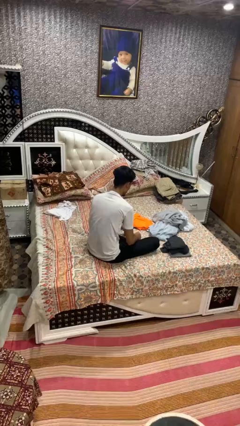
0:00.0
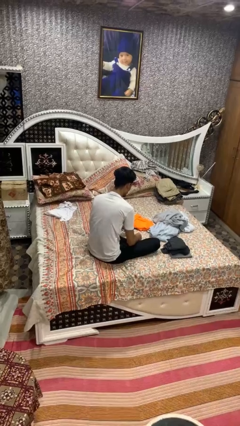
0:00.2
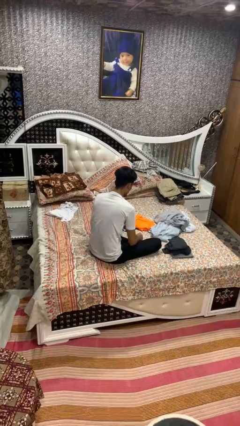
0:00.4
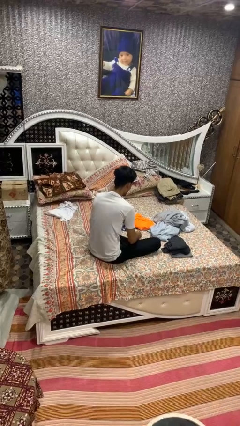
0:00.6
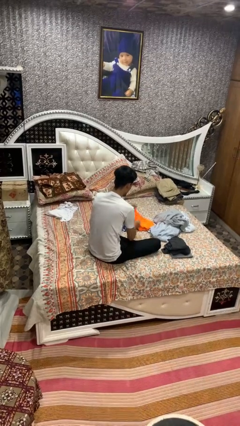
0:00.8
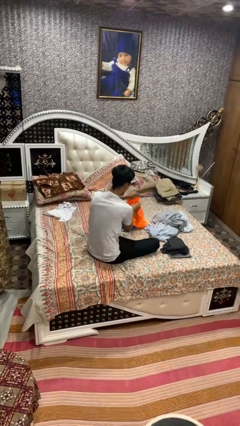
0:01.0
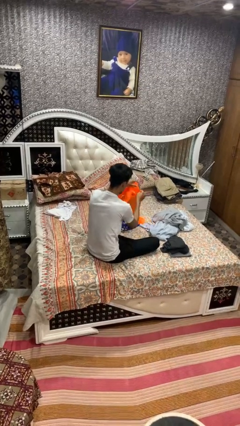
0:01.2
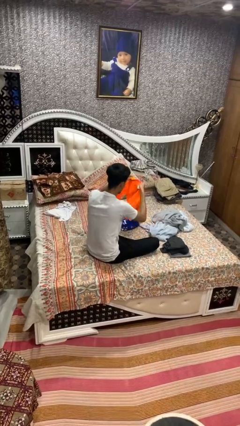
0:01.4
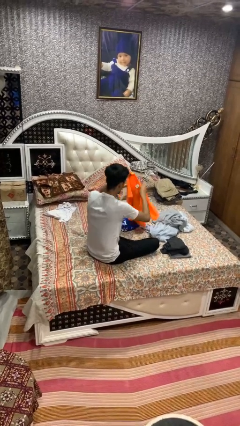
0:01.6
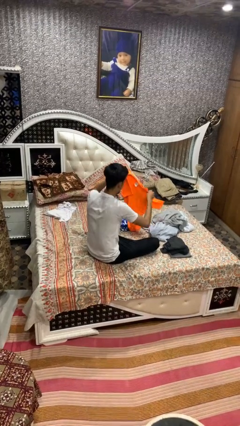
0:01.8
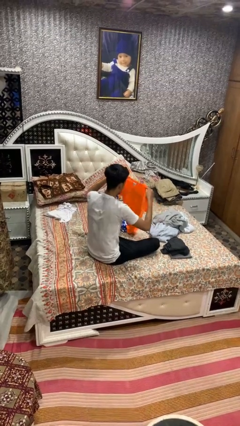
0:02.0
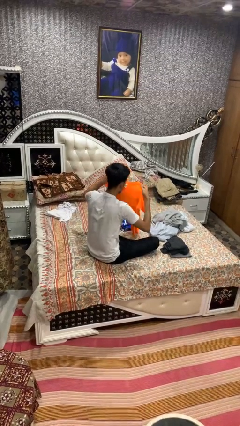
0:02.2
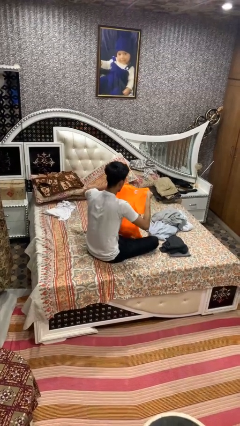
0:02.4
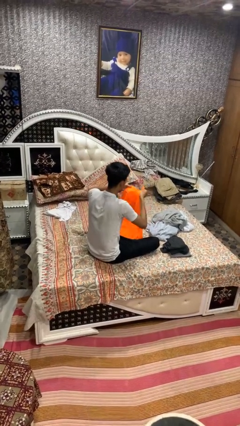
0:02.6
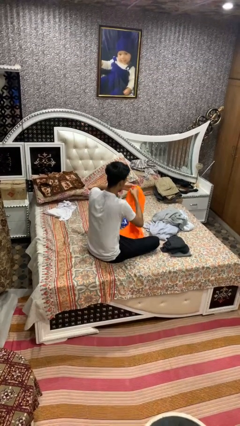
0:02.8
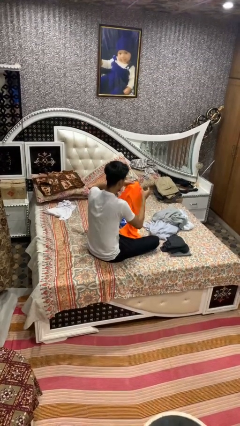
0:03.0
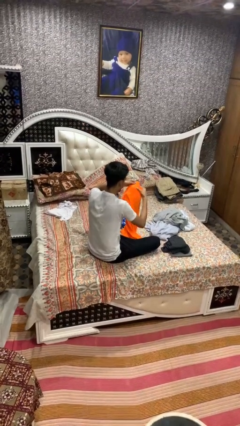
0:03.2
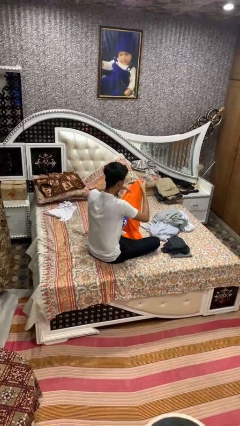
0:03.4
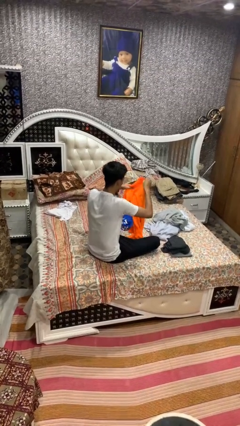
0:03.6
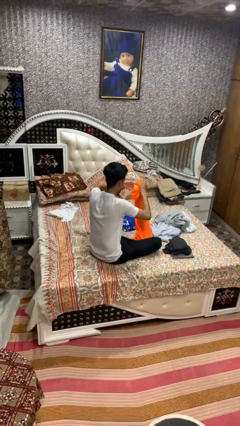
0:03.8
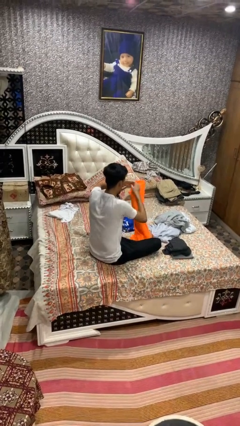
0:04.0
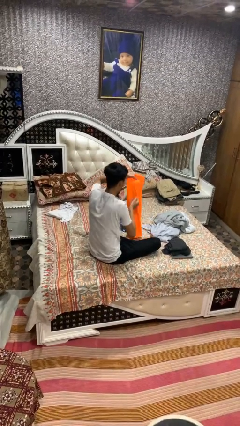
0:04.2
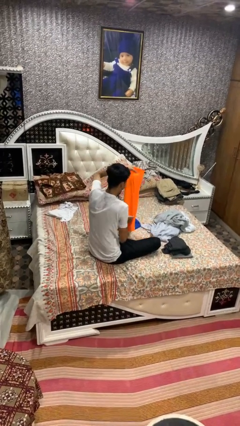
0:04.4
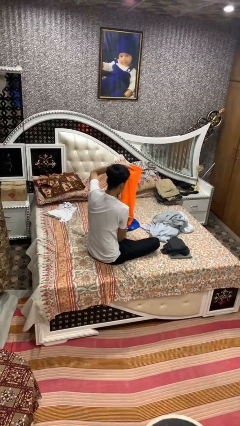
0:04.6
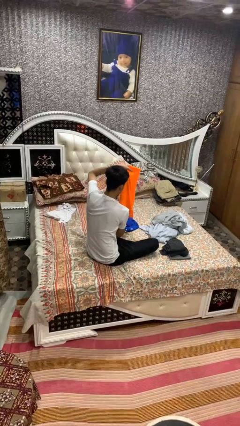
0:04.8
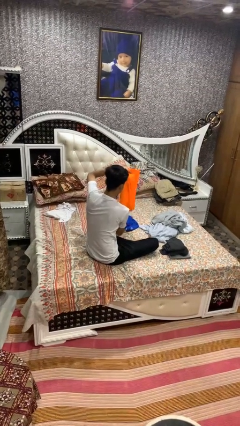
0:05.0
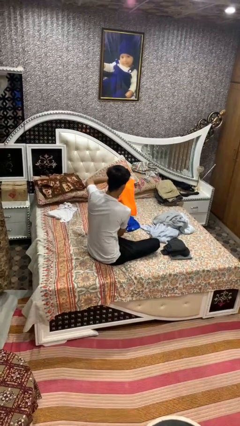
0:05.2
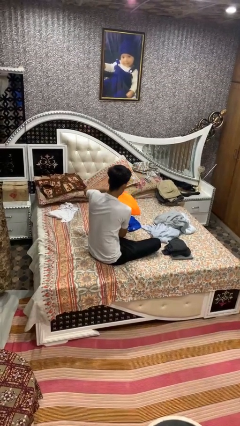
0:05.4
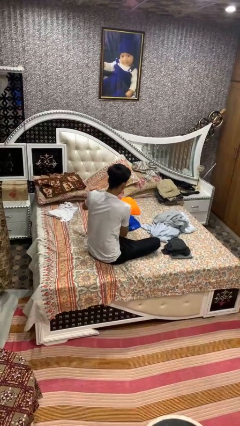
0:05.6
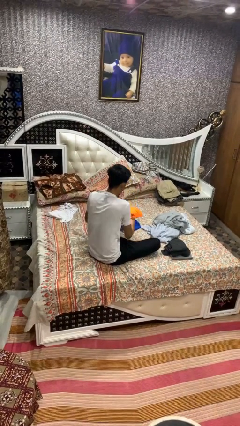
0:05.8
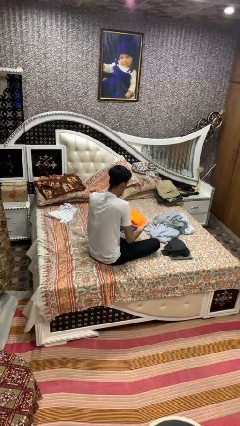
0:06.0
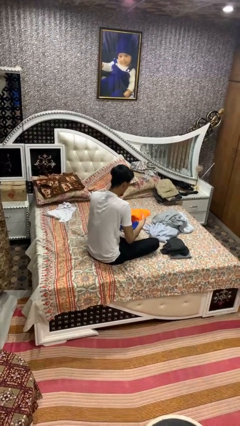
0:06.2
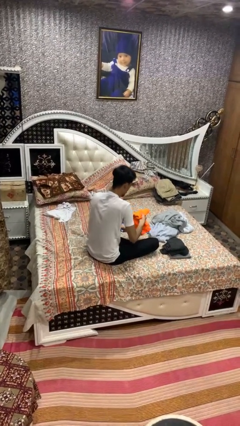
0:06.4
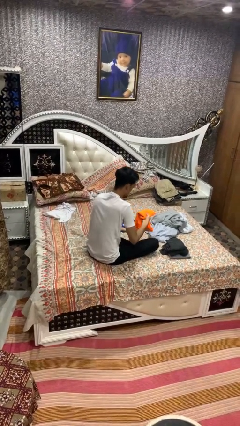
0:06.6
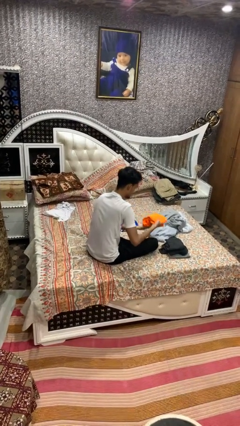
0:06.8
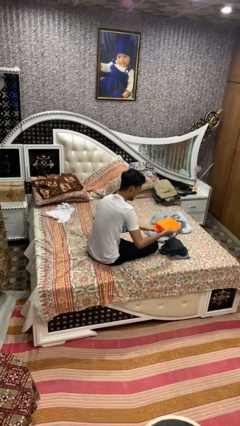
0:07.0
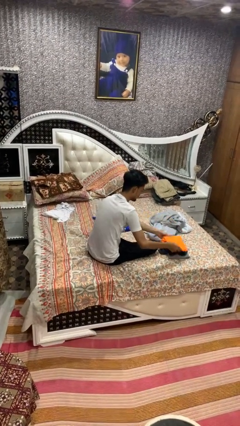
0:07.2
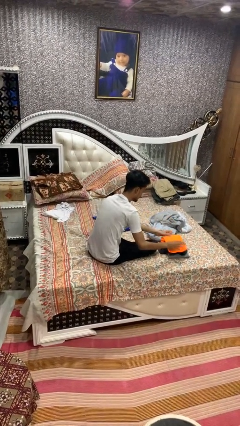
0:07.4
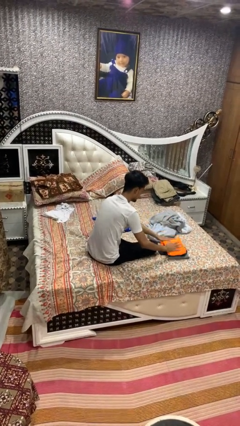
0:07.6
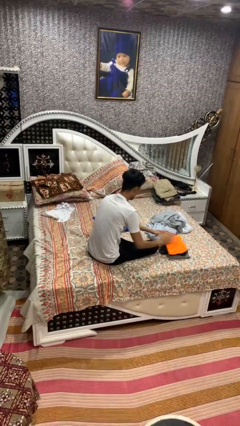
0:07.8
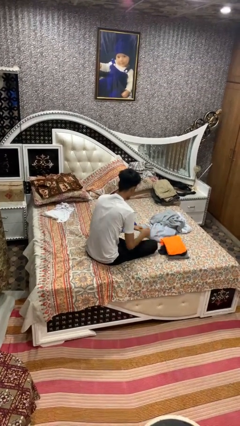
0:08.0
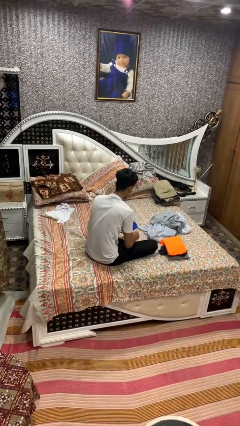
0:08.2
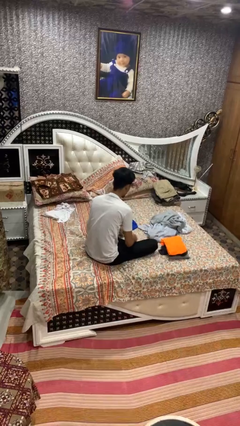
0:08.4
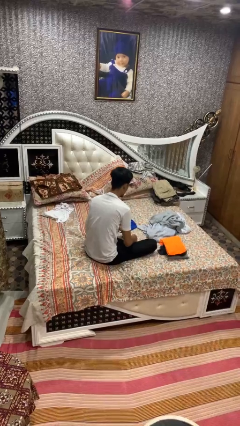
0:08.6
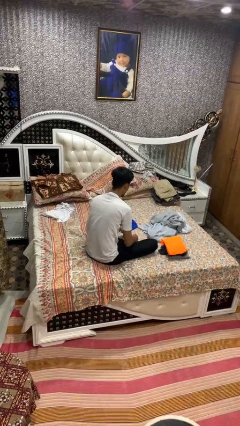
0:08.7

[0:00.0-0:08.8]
person folds shirt

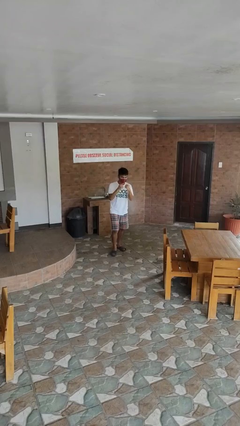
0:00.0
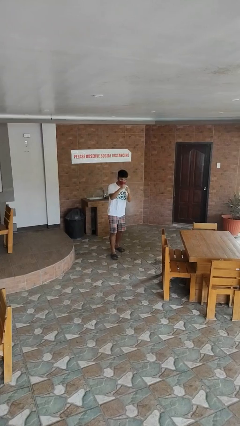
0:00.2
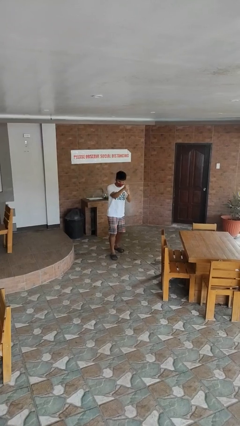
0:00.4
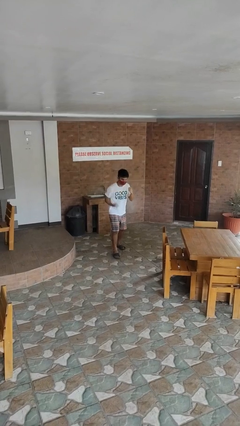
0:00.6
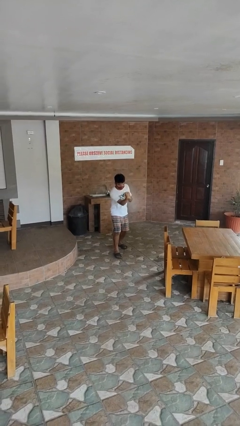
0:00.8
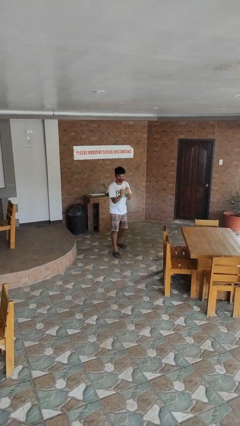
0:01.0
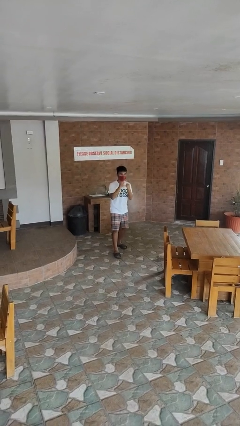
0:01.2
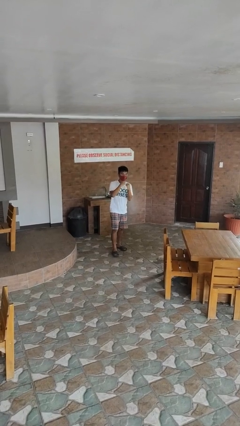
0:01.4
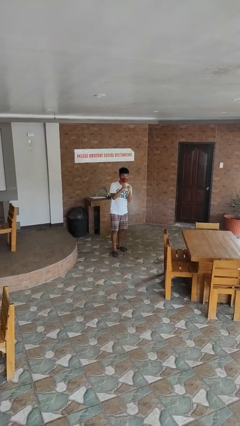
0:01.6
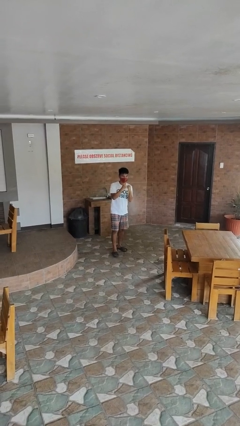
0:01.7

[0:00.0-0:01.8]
person punches

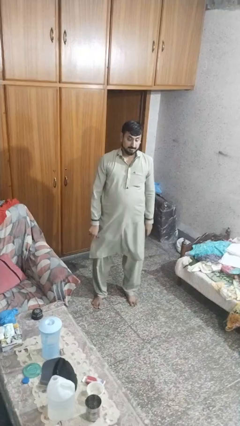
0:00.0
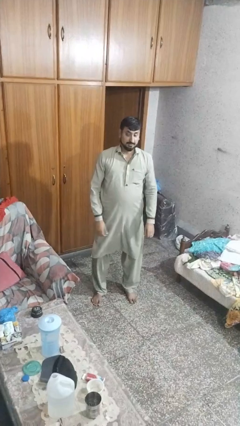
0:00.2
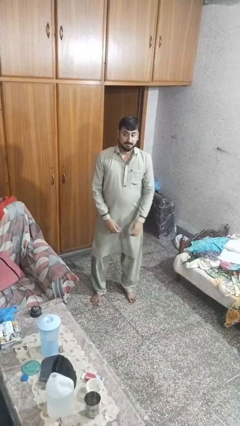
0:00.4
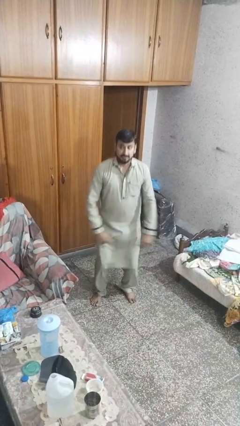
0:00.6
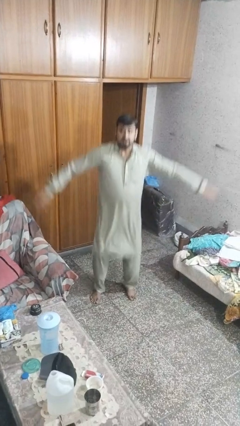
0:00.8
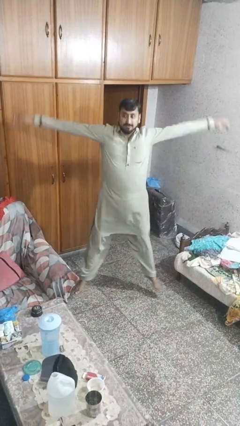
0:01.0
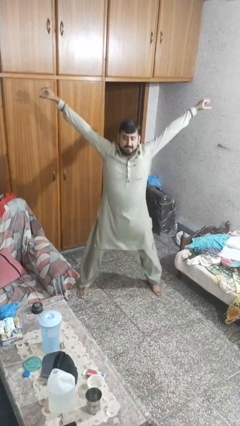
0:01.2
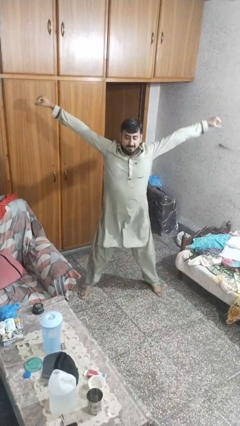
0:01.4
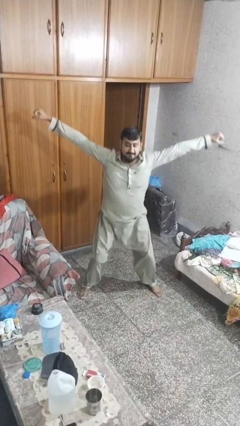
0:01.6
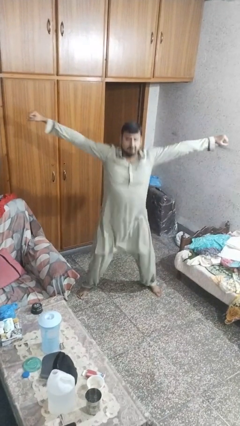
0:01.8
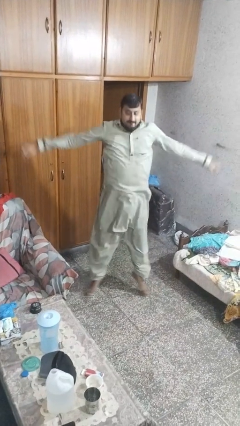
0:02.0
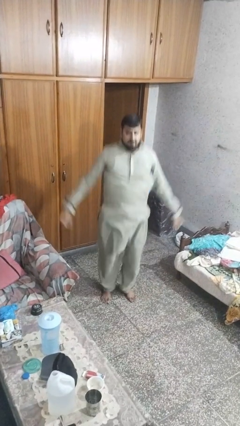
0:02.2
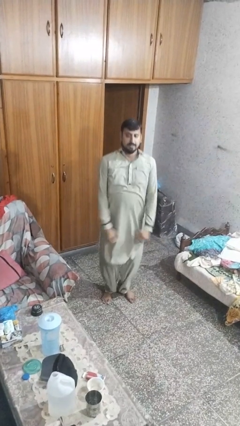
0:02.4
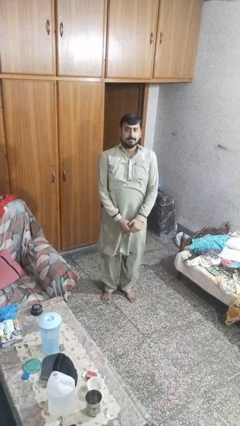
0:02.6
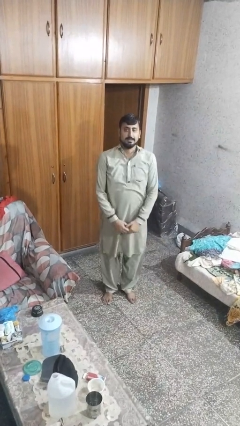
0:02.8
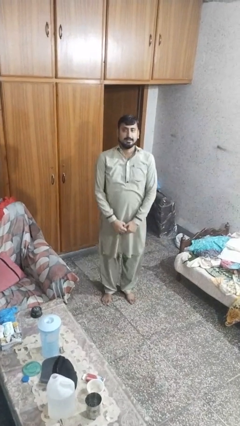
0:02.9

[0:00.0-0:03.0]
person exercises with jumping jacks

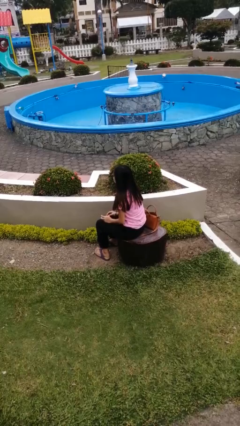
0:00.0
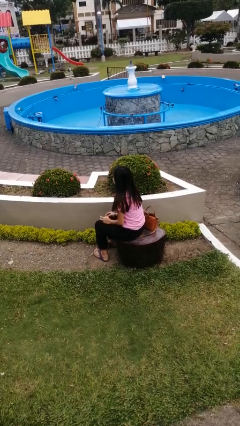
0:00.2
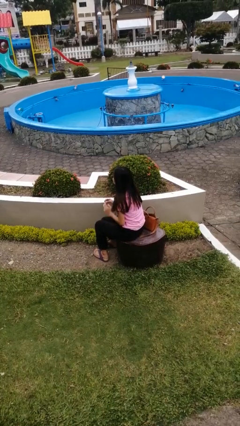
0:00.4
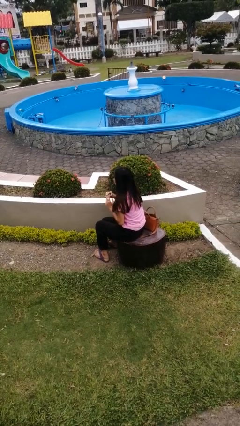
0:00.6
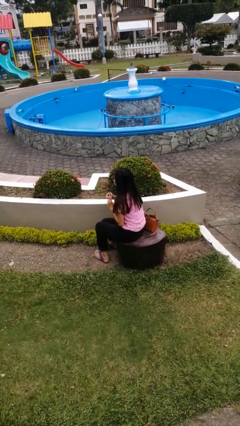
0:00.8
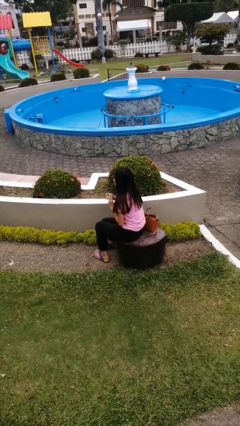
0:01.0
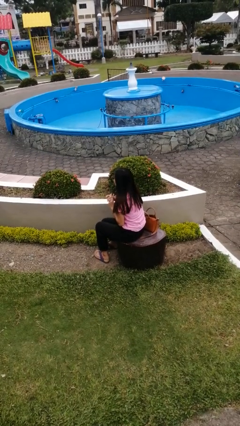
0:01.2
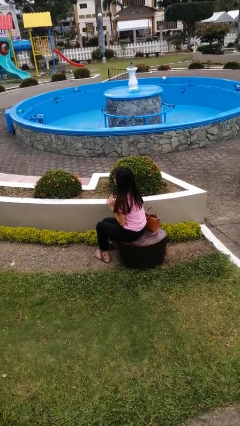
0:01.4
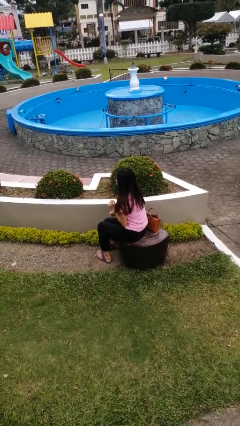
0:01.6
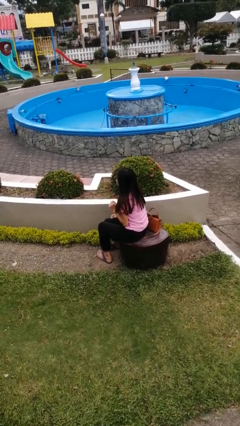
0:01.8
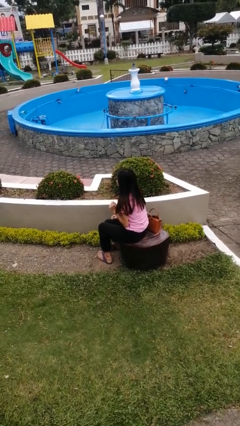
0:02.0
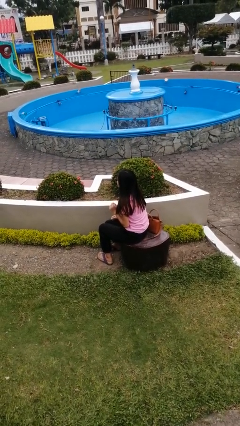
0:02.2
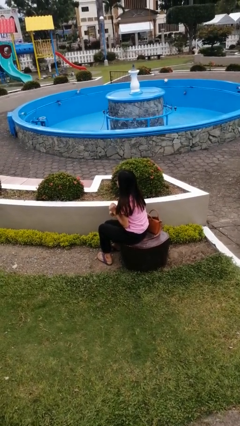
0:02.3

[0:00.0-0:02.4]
person puts on ring

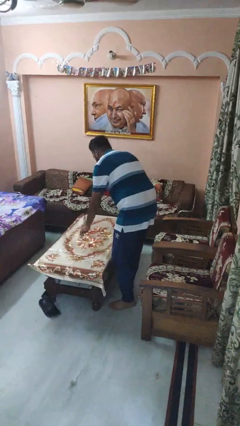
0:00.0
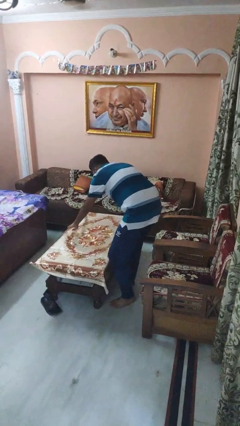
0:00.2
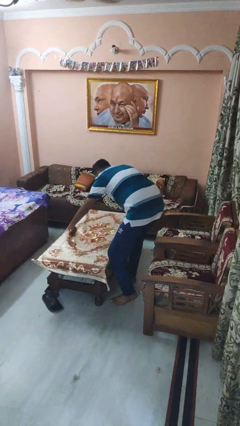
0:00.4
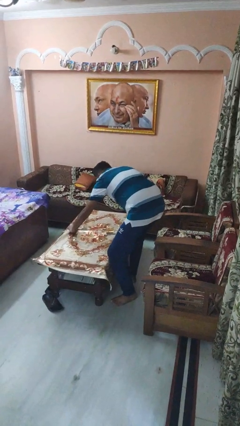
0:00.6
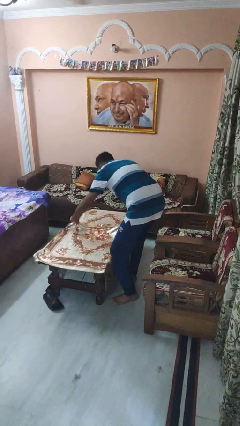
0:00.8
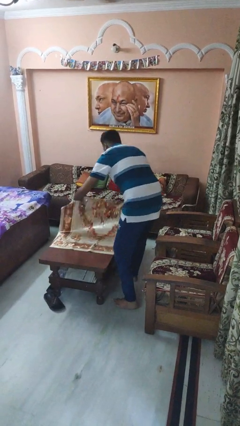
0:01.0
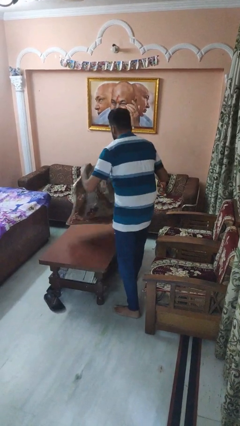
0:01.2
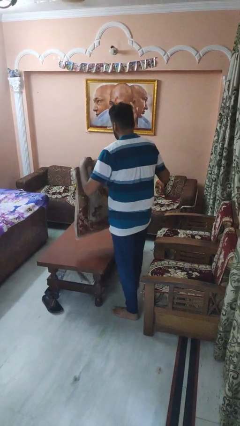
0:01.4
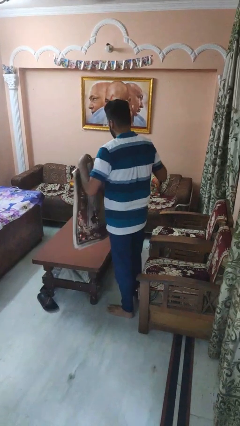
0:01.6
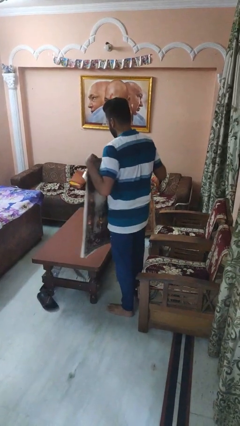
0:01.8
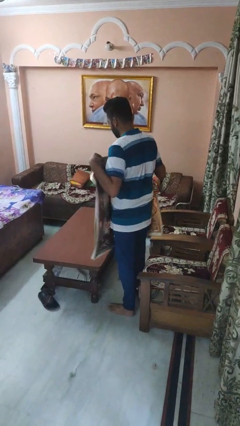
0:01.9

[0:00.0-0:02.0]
person folds tablecloth
